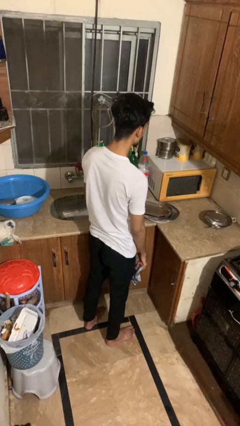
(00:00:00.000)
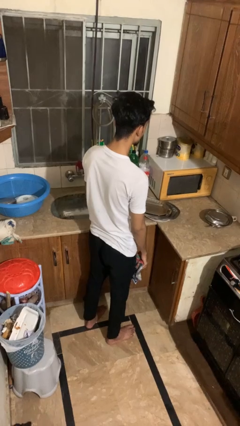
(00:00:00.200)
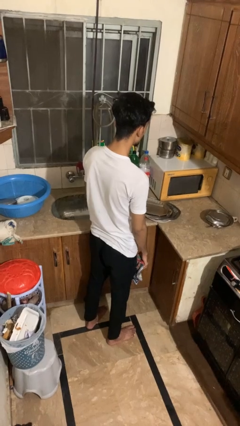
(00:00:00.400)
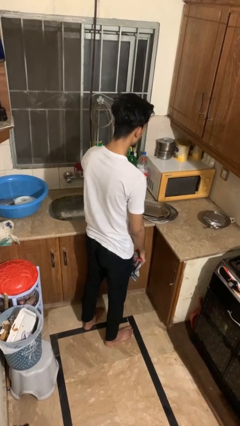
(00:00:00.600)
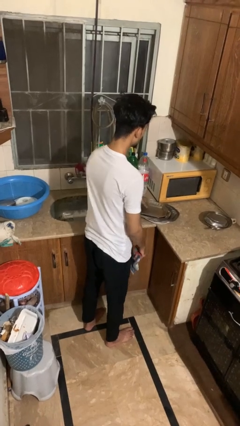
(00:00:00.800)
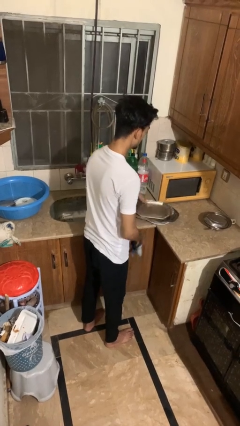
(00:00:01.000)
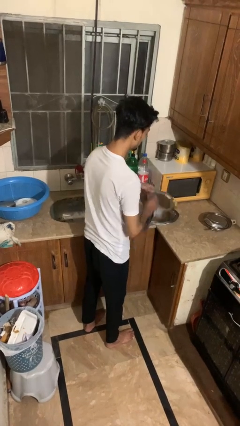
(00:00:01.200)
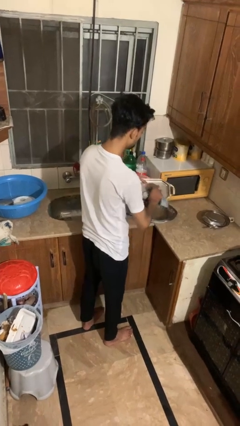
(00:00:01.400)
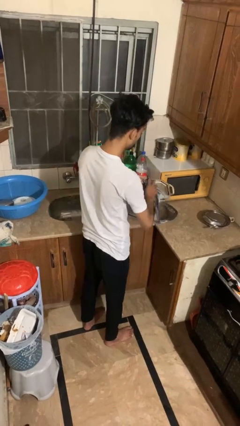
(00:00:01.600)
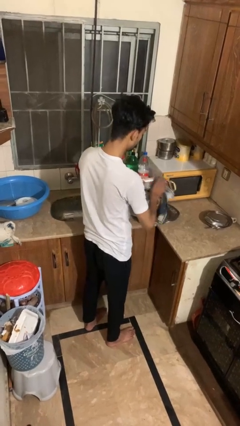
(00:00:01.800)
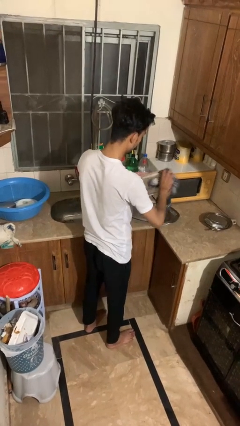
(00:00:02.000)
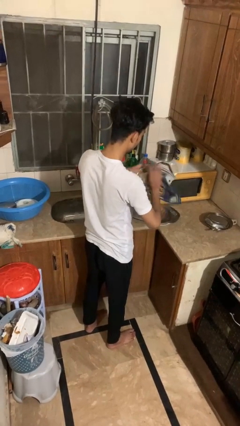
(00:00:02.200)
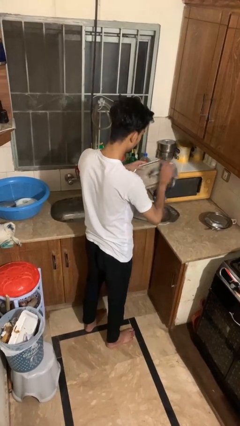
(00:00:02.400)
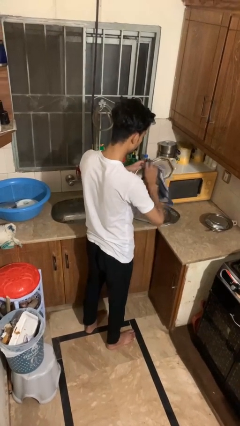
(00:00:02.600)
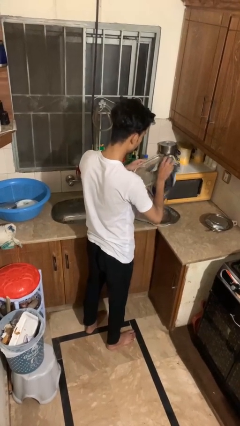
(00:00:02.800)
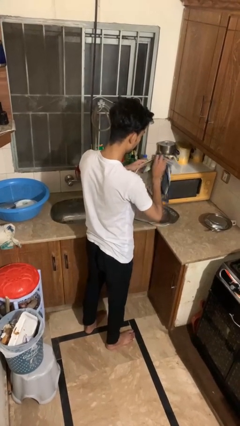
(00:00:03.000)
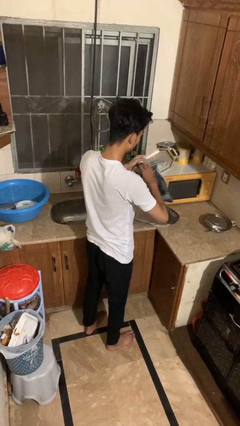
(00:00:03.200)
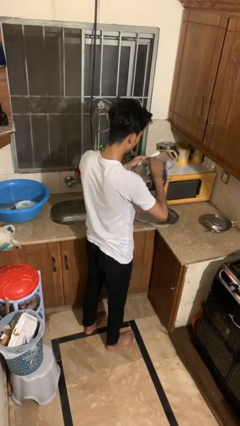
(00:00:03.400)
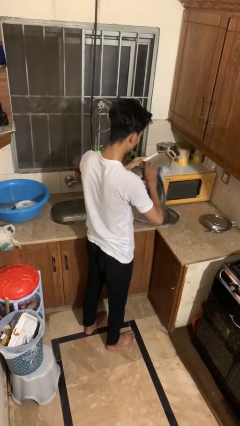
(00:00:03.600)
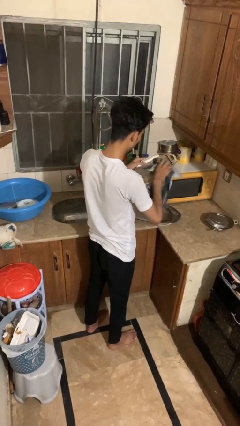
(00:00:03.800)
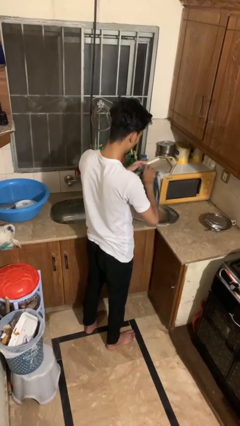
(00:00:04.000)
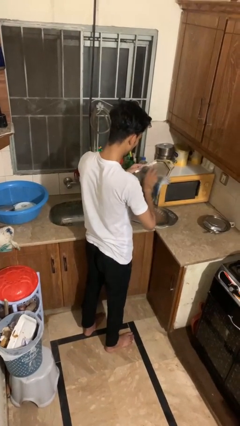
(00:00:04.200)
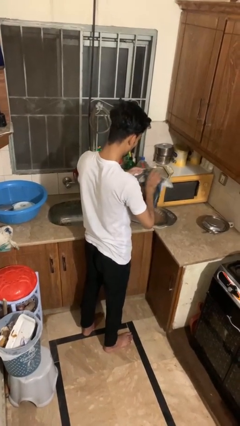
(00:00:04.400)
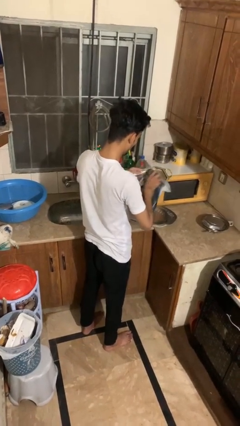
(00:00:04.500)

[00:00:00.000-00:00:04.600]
person dries dish

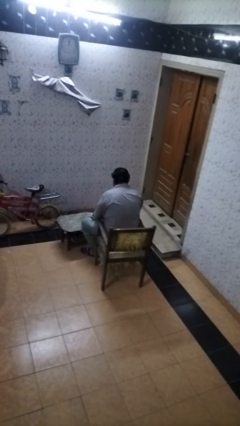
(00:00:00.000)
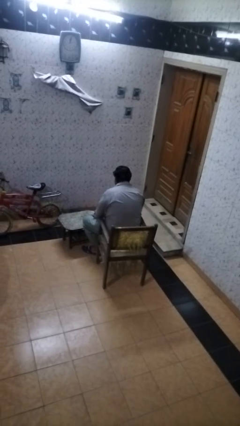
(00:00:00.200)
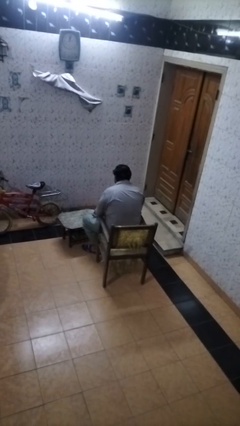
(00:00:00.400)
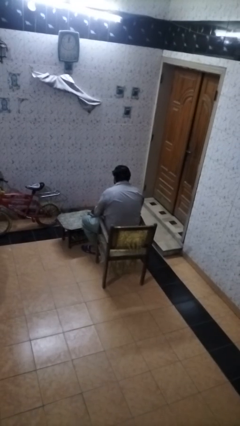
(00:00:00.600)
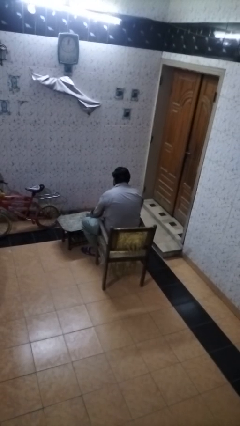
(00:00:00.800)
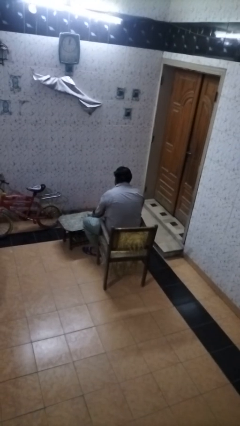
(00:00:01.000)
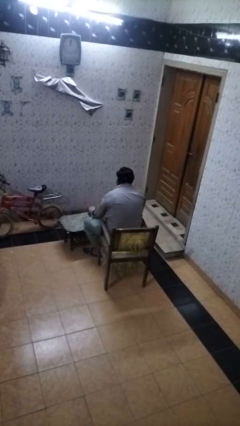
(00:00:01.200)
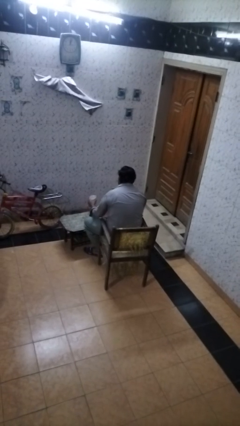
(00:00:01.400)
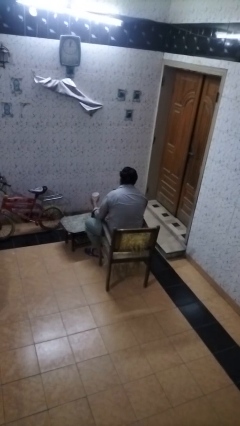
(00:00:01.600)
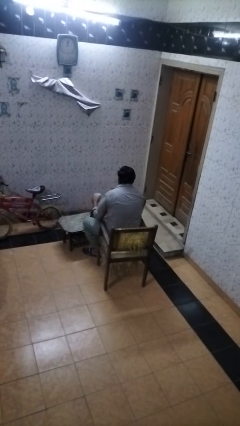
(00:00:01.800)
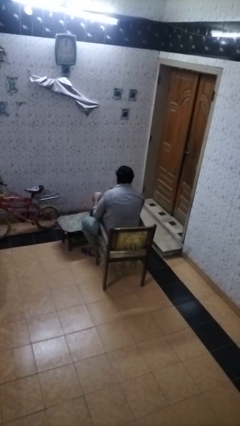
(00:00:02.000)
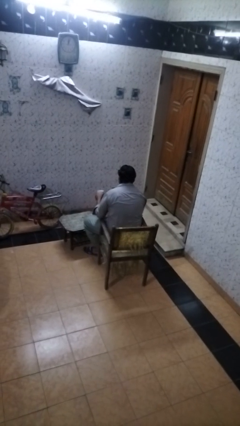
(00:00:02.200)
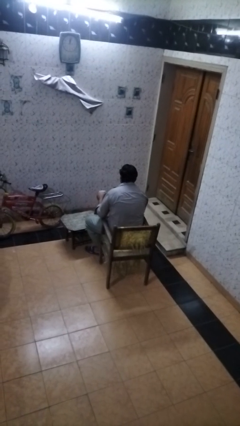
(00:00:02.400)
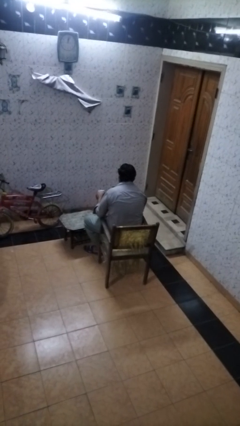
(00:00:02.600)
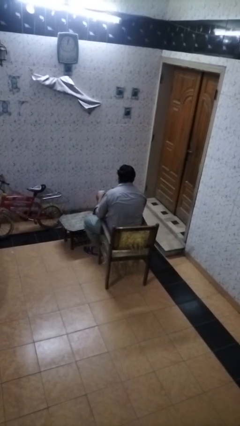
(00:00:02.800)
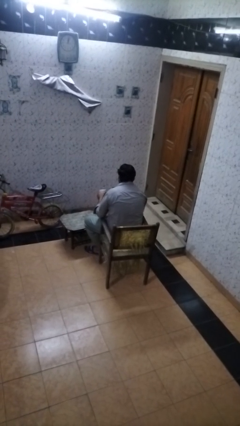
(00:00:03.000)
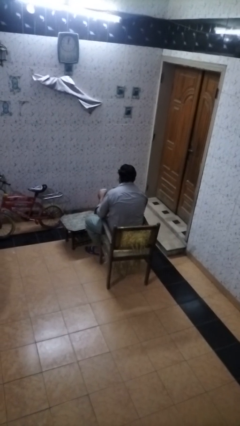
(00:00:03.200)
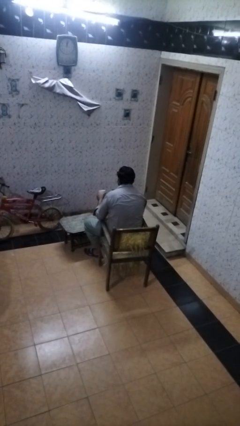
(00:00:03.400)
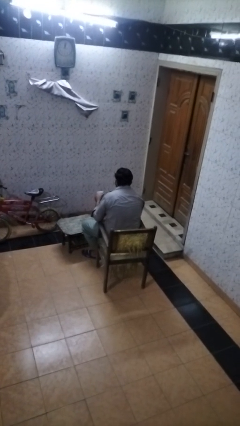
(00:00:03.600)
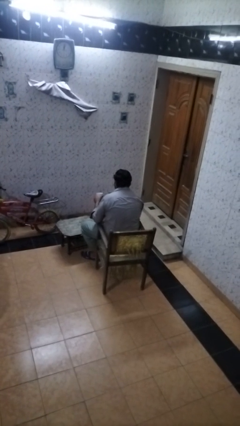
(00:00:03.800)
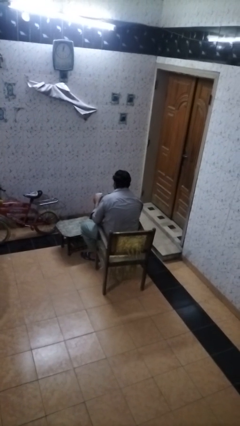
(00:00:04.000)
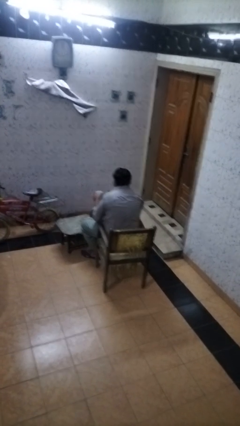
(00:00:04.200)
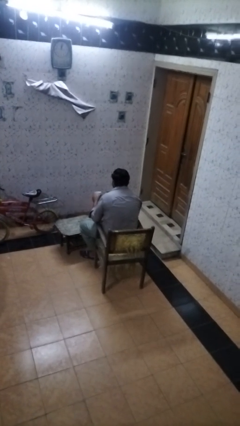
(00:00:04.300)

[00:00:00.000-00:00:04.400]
person picks up object from table

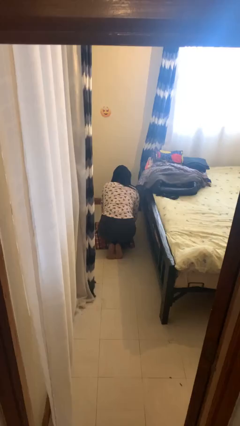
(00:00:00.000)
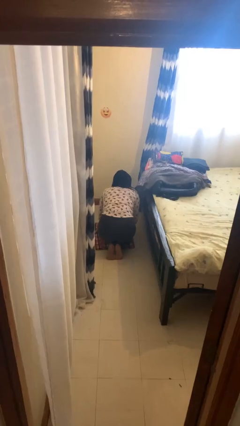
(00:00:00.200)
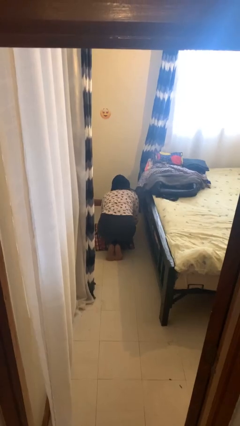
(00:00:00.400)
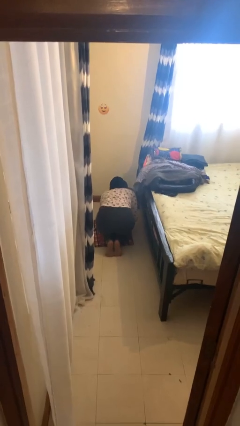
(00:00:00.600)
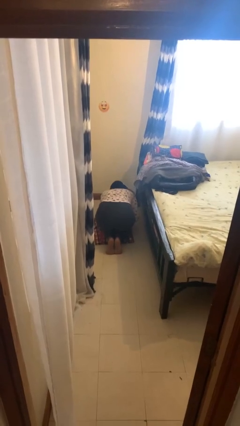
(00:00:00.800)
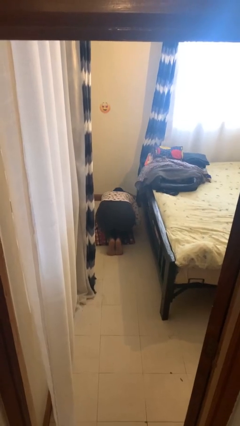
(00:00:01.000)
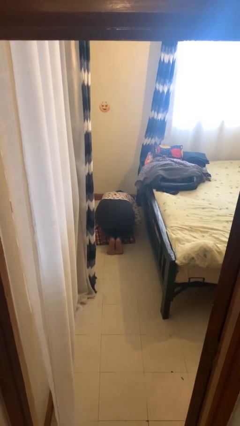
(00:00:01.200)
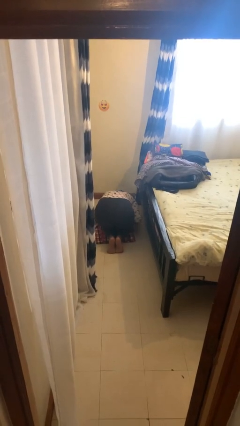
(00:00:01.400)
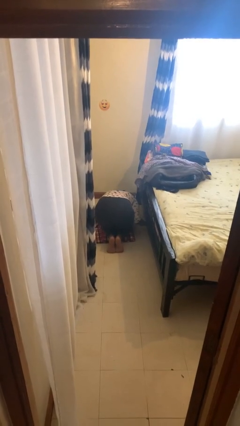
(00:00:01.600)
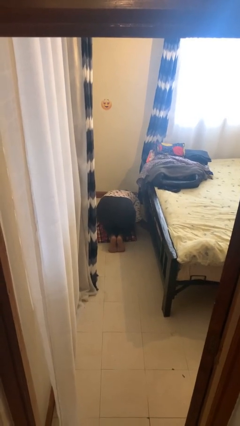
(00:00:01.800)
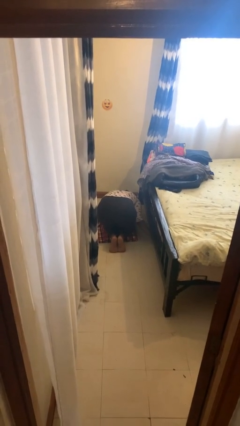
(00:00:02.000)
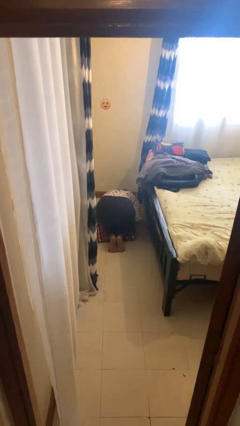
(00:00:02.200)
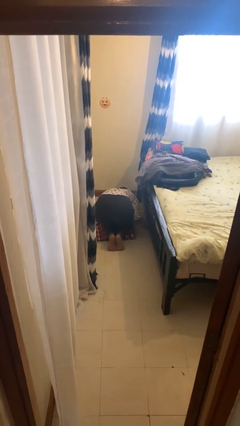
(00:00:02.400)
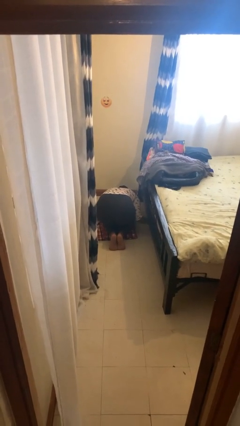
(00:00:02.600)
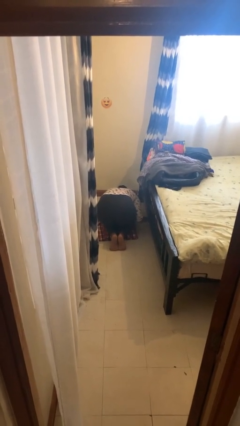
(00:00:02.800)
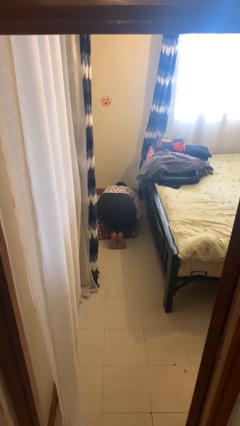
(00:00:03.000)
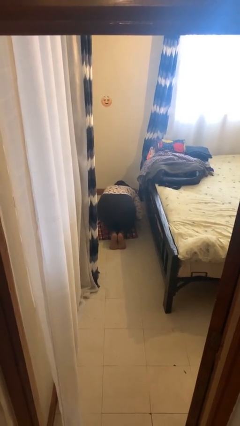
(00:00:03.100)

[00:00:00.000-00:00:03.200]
person searches under bed

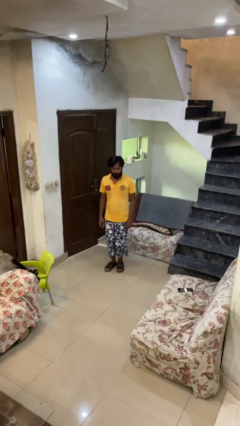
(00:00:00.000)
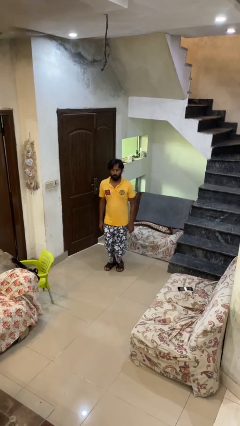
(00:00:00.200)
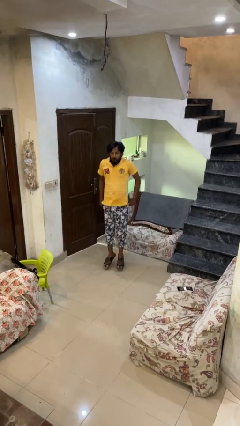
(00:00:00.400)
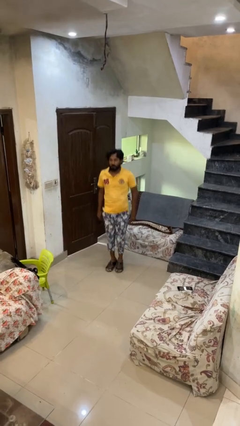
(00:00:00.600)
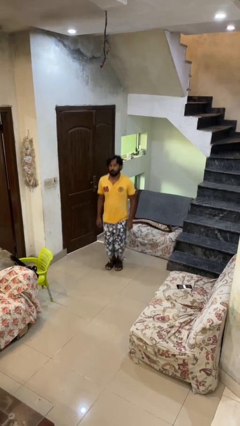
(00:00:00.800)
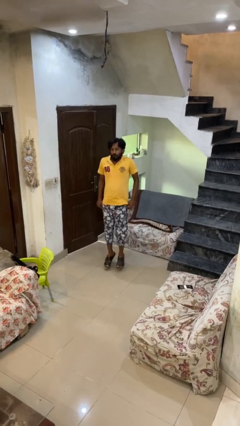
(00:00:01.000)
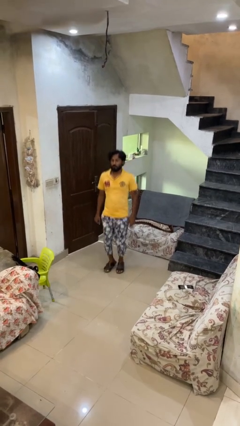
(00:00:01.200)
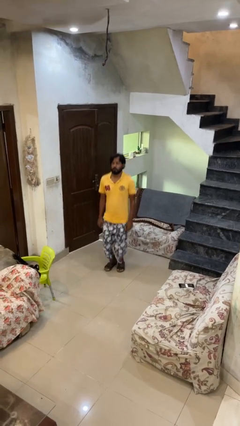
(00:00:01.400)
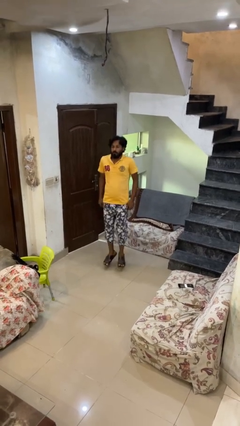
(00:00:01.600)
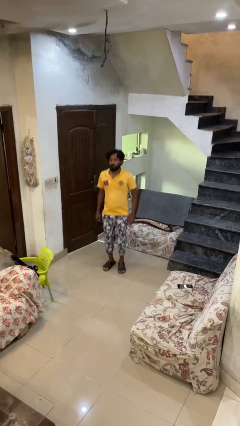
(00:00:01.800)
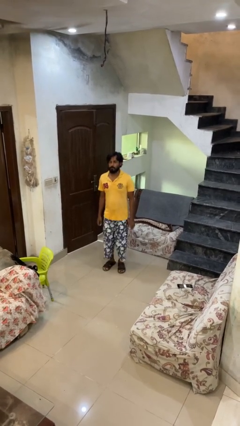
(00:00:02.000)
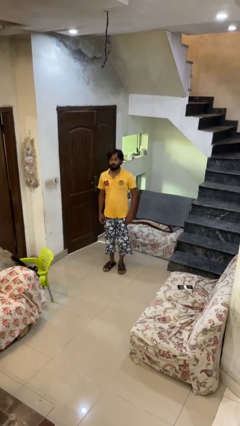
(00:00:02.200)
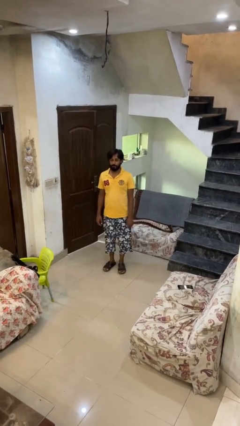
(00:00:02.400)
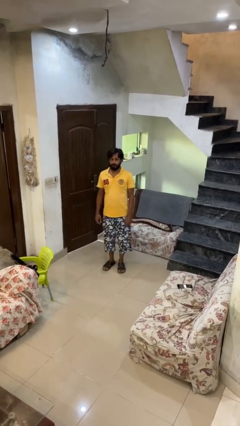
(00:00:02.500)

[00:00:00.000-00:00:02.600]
person jumps

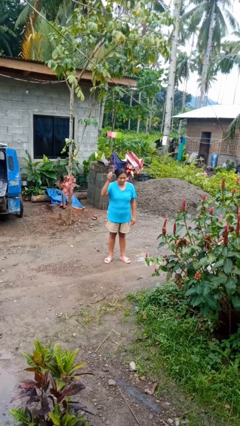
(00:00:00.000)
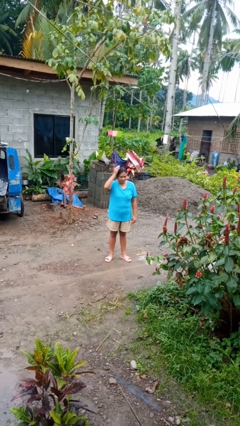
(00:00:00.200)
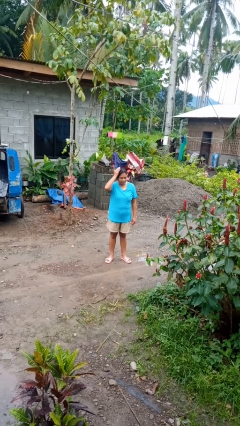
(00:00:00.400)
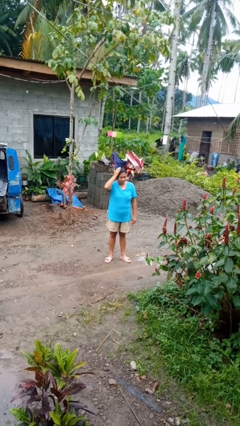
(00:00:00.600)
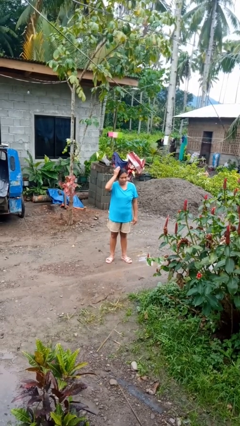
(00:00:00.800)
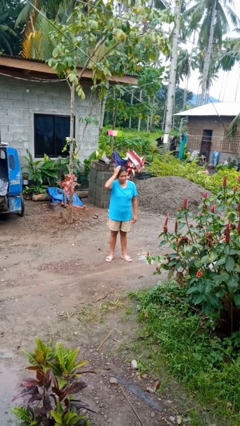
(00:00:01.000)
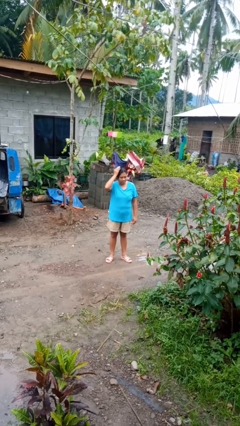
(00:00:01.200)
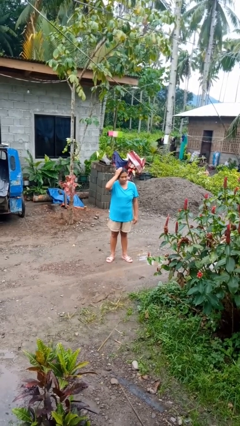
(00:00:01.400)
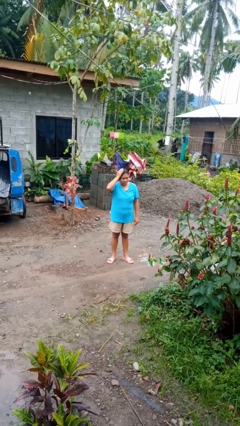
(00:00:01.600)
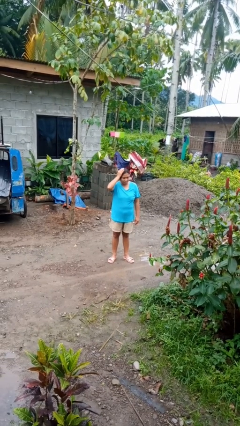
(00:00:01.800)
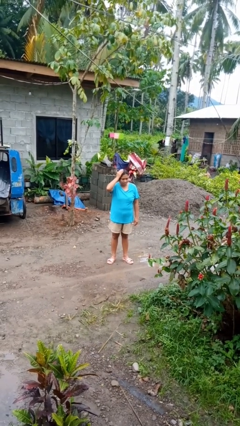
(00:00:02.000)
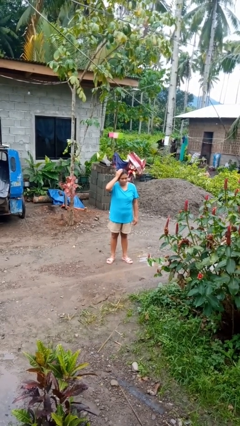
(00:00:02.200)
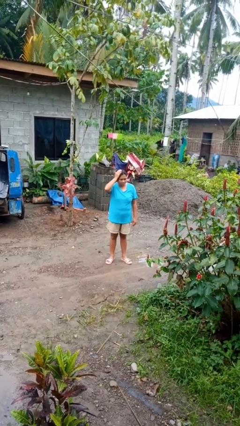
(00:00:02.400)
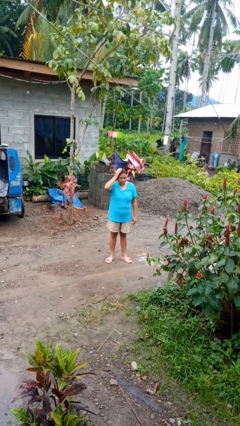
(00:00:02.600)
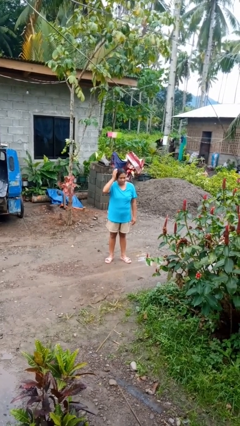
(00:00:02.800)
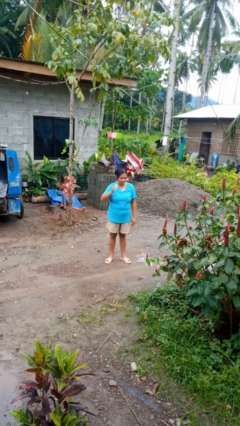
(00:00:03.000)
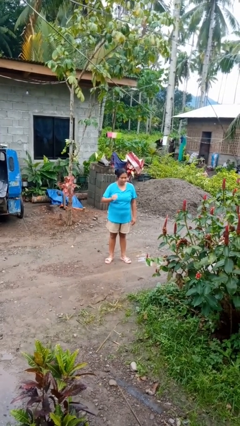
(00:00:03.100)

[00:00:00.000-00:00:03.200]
person pats head
